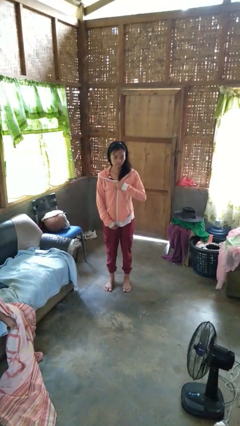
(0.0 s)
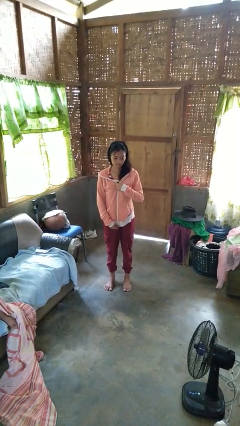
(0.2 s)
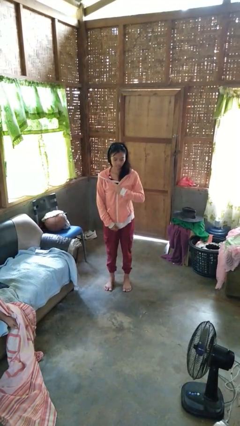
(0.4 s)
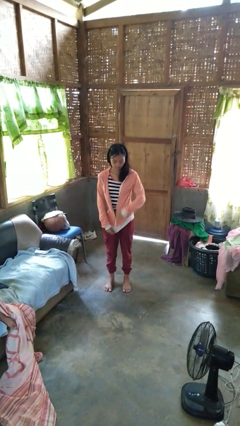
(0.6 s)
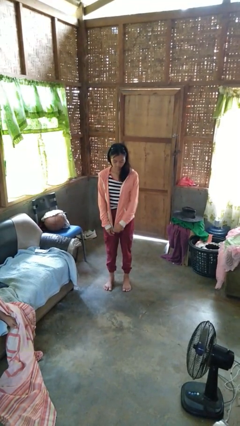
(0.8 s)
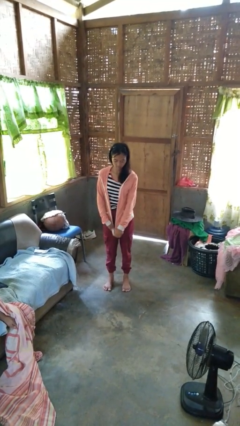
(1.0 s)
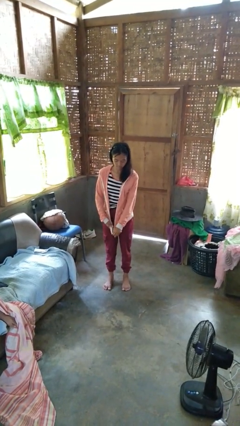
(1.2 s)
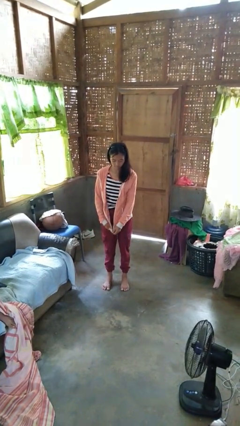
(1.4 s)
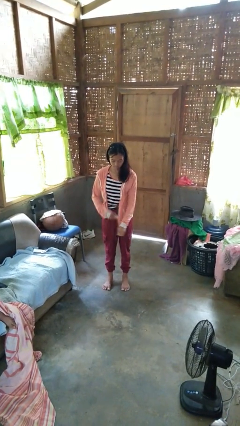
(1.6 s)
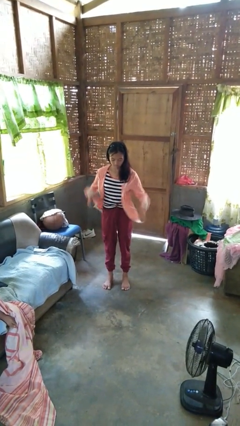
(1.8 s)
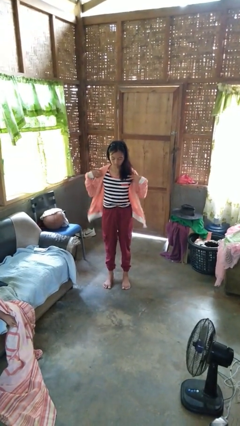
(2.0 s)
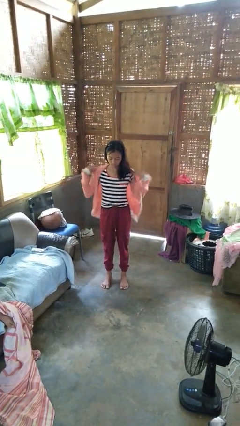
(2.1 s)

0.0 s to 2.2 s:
person unzips jacket

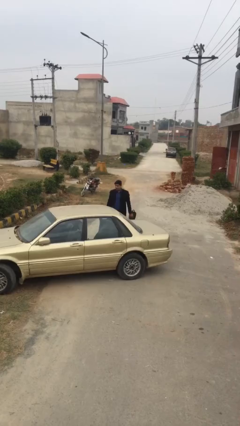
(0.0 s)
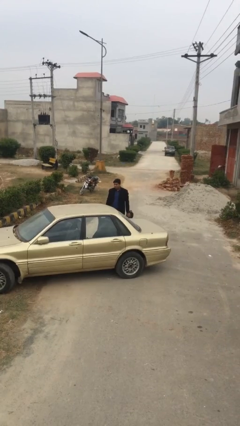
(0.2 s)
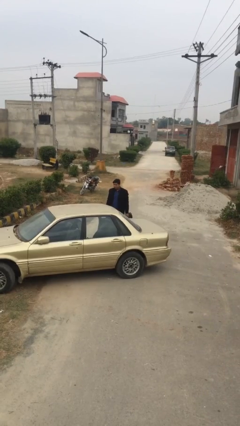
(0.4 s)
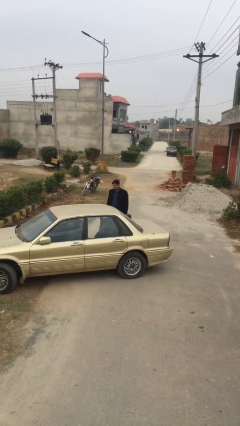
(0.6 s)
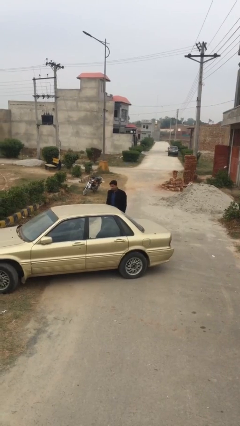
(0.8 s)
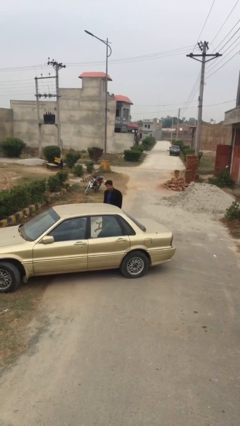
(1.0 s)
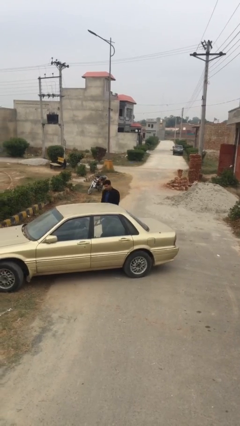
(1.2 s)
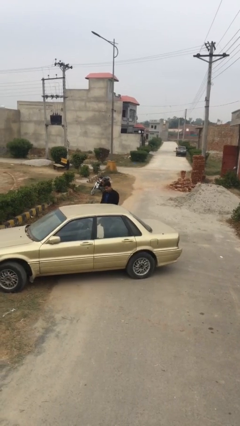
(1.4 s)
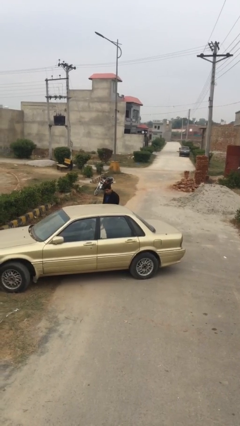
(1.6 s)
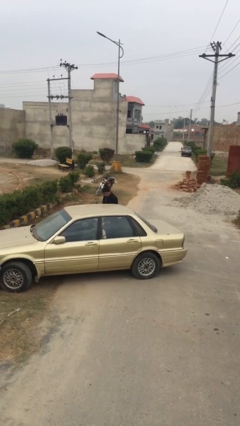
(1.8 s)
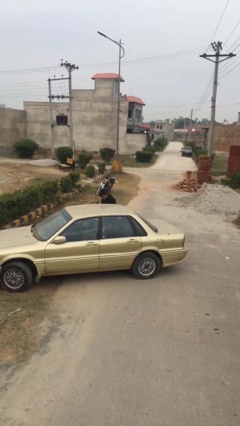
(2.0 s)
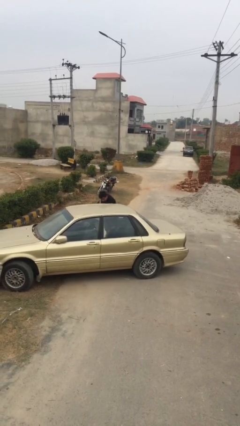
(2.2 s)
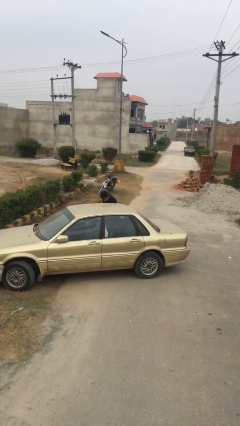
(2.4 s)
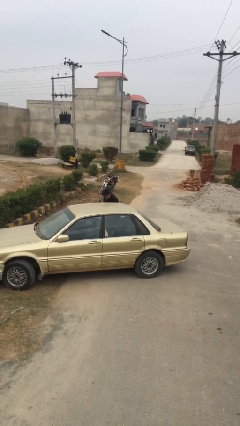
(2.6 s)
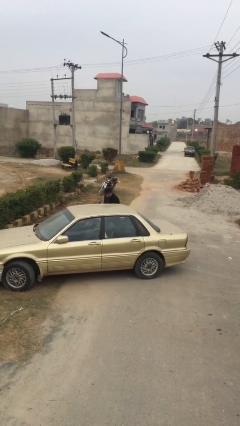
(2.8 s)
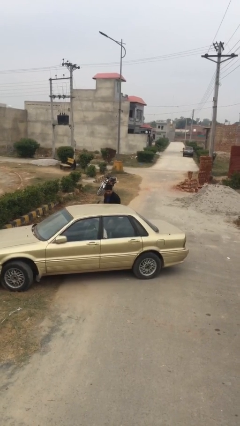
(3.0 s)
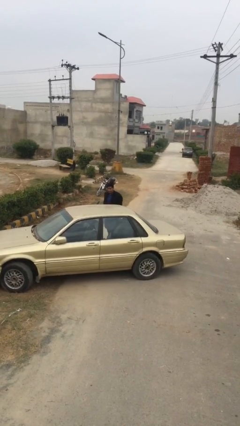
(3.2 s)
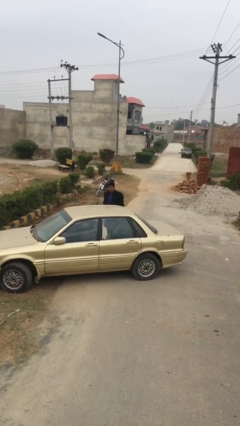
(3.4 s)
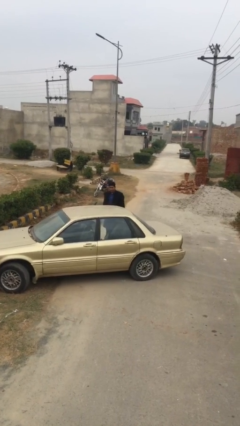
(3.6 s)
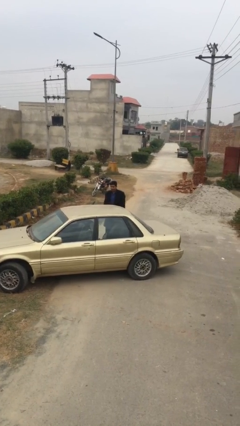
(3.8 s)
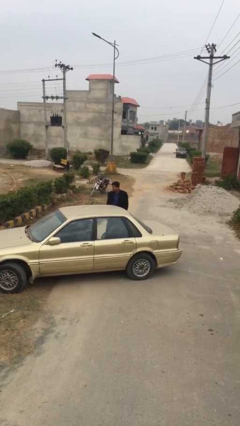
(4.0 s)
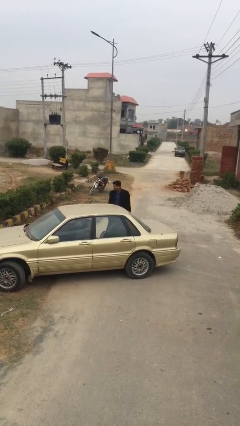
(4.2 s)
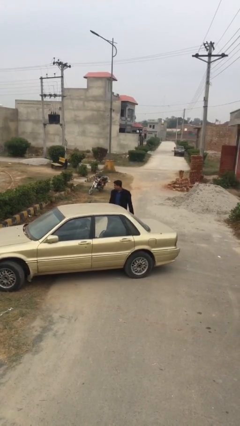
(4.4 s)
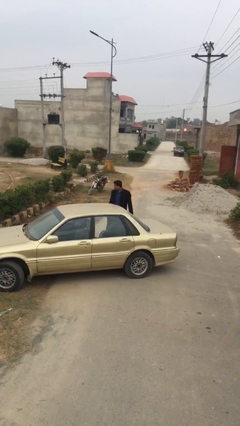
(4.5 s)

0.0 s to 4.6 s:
person loads car

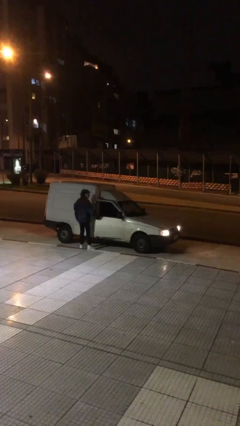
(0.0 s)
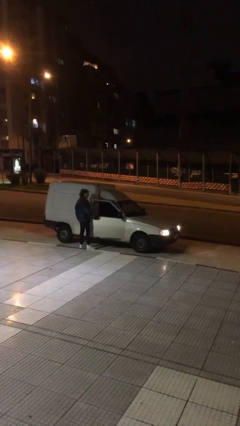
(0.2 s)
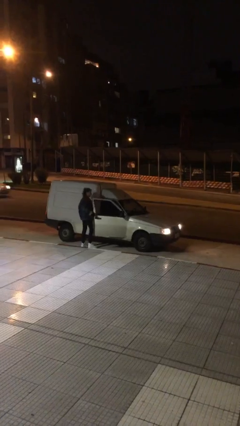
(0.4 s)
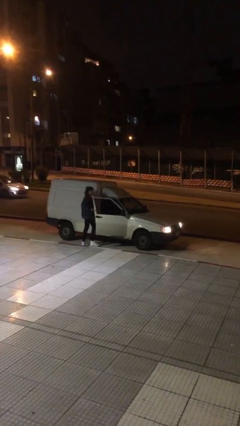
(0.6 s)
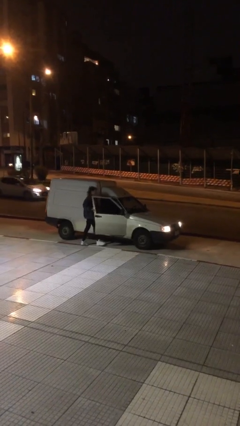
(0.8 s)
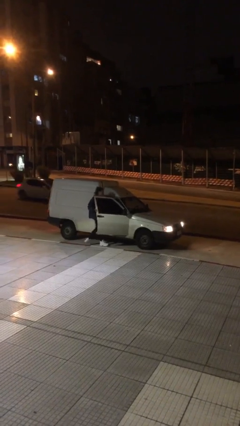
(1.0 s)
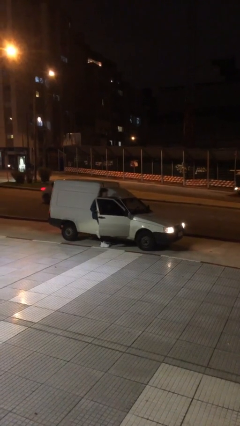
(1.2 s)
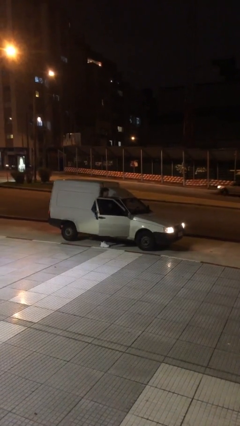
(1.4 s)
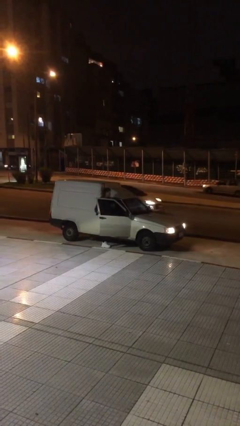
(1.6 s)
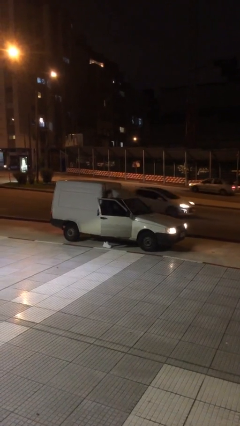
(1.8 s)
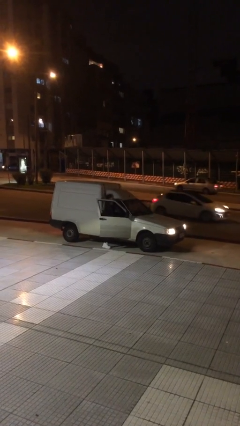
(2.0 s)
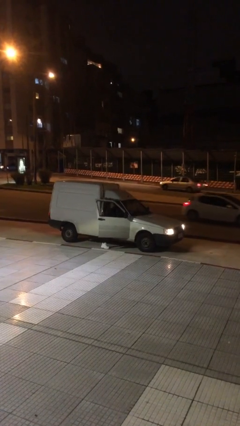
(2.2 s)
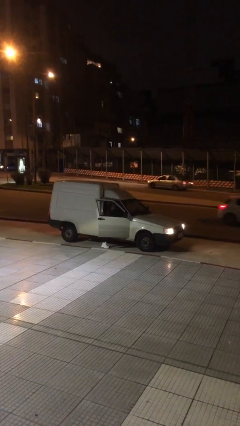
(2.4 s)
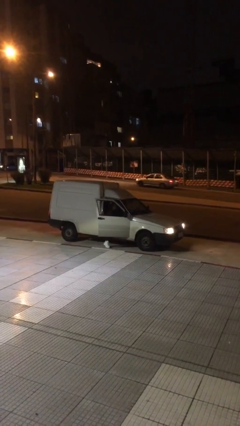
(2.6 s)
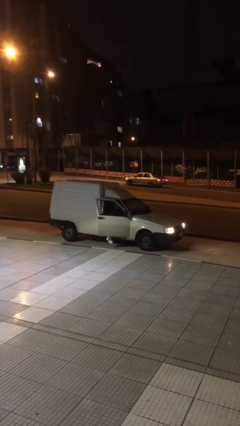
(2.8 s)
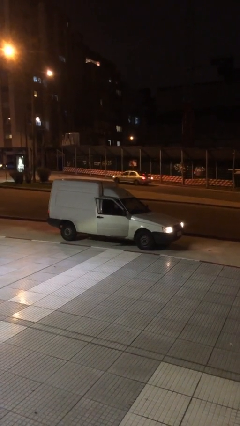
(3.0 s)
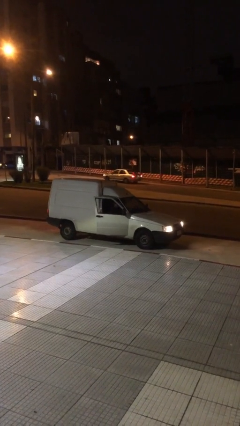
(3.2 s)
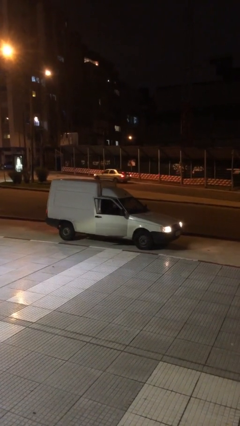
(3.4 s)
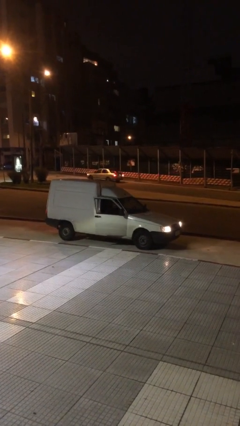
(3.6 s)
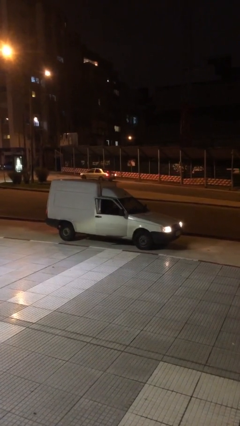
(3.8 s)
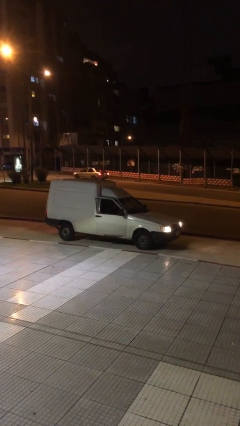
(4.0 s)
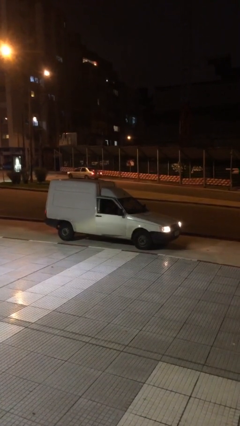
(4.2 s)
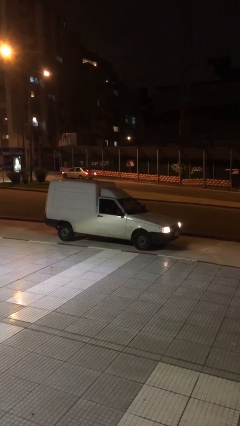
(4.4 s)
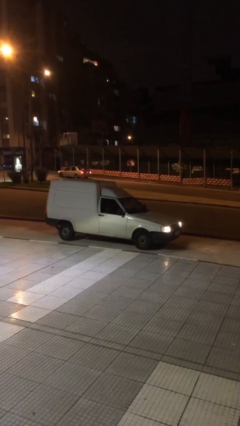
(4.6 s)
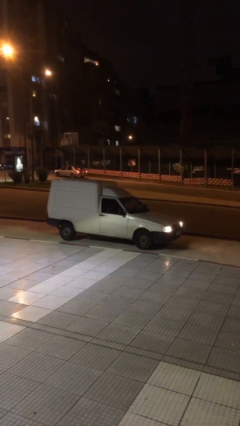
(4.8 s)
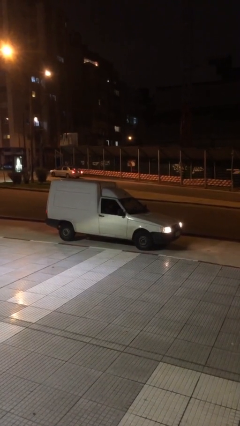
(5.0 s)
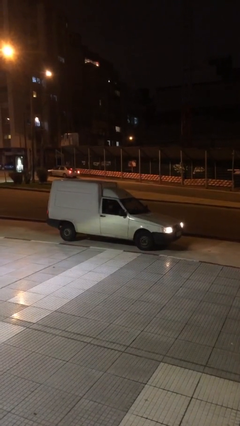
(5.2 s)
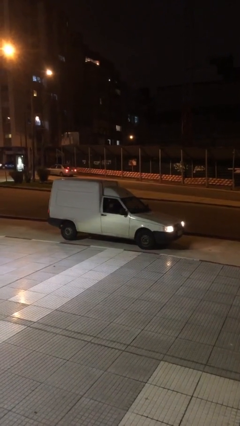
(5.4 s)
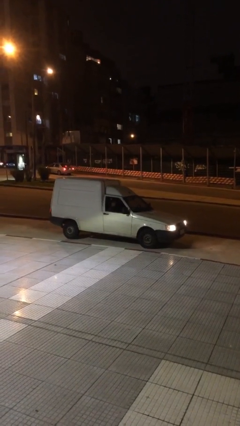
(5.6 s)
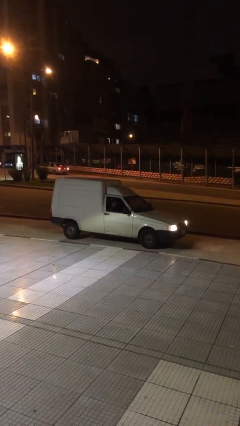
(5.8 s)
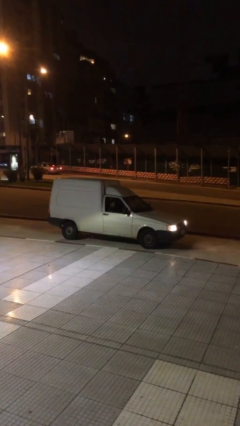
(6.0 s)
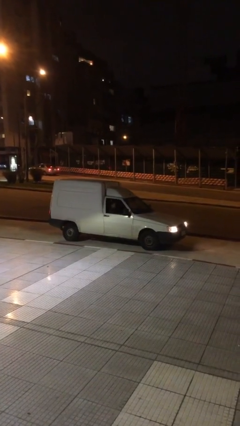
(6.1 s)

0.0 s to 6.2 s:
car picks up person

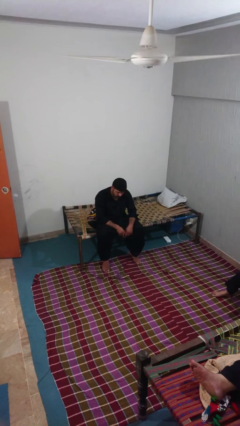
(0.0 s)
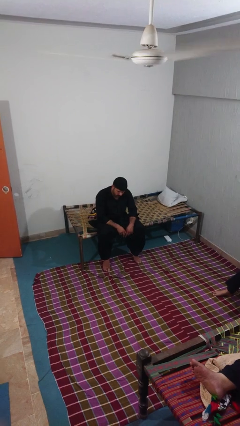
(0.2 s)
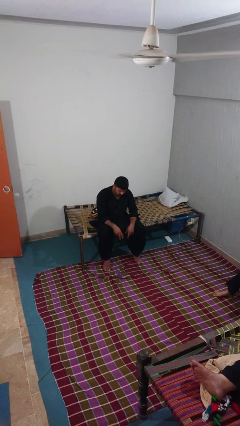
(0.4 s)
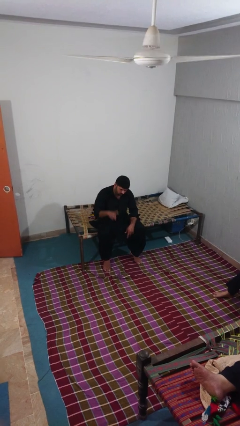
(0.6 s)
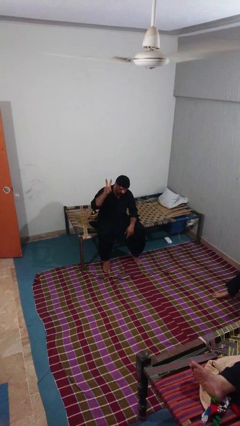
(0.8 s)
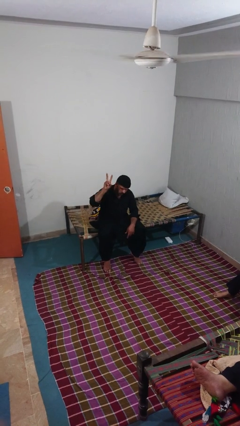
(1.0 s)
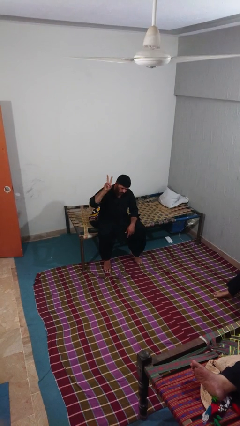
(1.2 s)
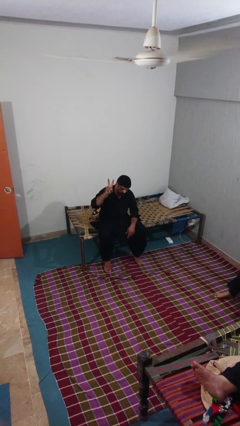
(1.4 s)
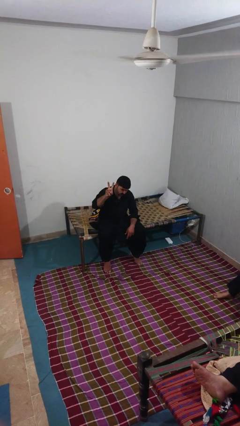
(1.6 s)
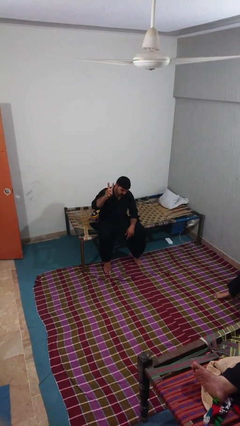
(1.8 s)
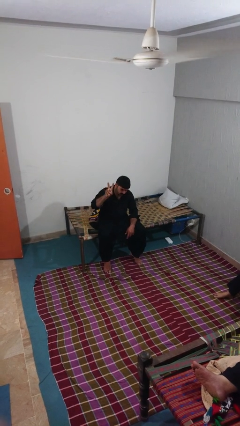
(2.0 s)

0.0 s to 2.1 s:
person gestures peace

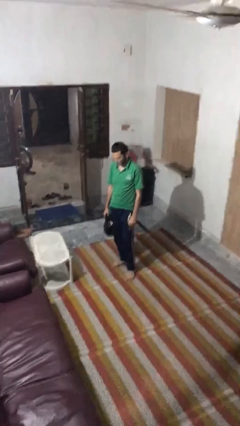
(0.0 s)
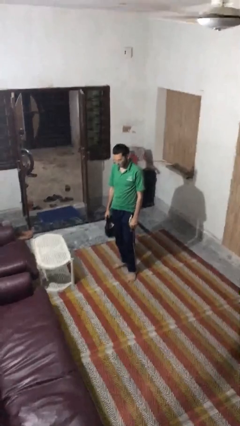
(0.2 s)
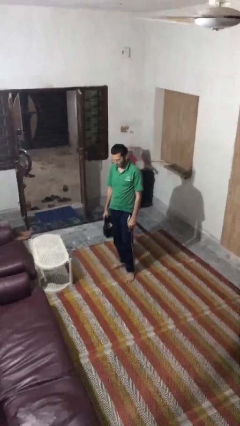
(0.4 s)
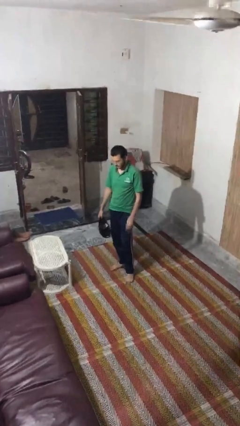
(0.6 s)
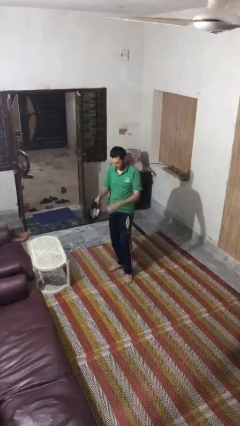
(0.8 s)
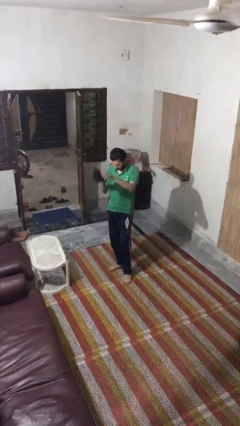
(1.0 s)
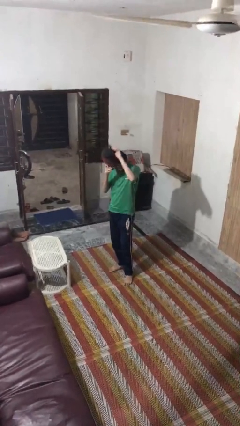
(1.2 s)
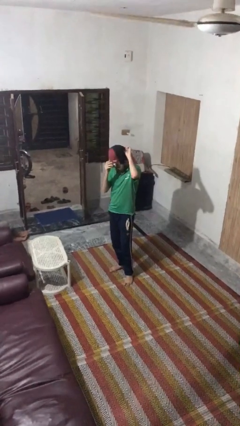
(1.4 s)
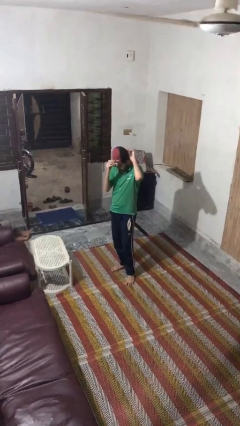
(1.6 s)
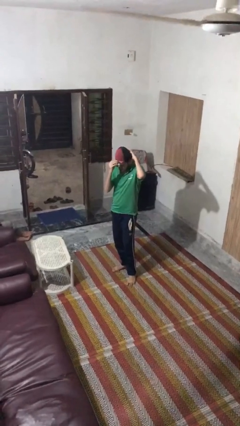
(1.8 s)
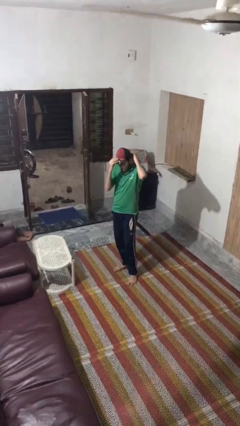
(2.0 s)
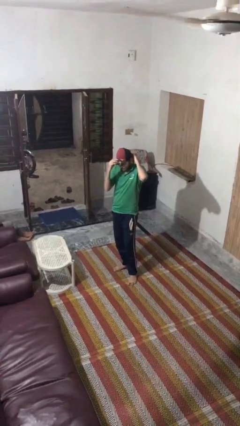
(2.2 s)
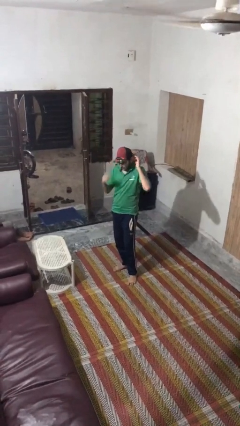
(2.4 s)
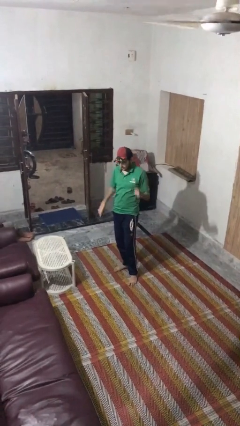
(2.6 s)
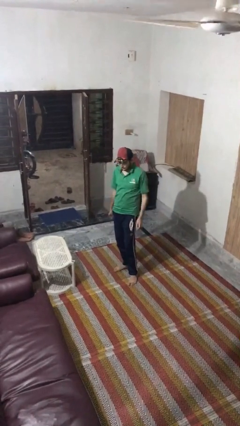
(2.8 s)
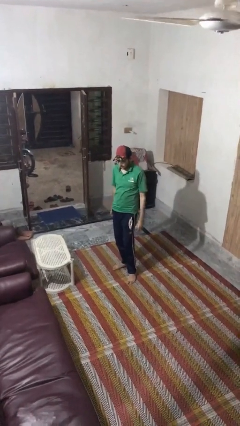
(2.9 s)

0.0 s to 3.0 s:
person puts on hat

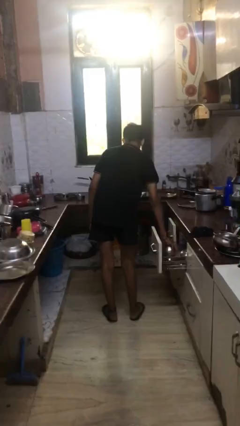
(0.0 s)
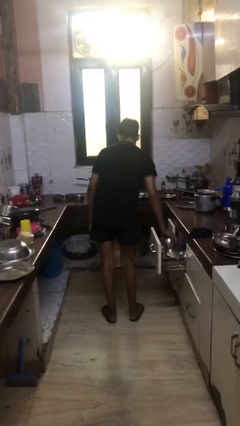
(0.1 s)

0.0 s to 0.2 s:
person takes object from kitchen drawer
